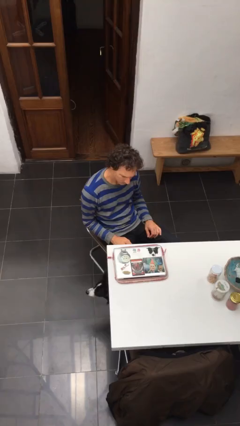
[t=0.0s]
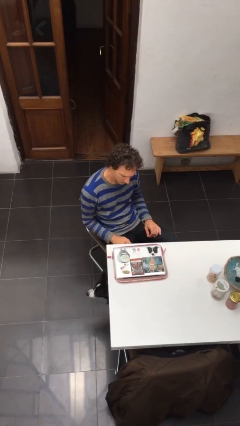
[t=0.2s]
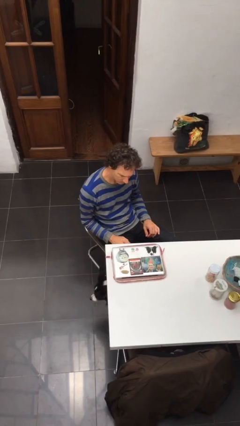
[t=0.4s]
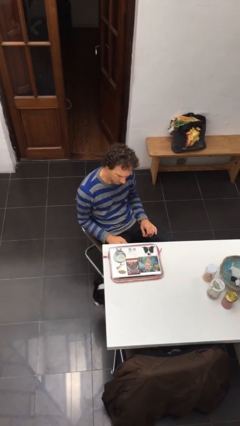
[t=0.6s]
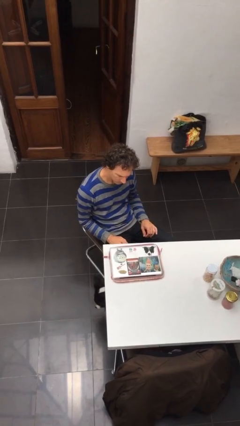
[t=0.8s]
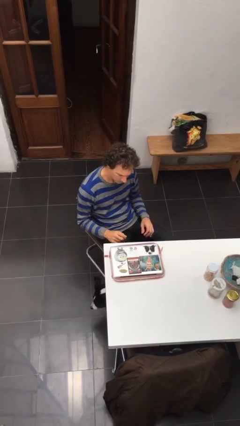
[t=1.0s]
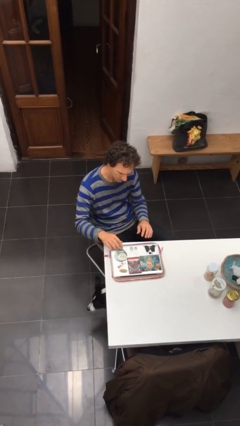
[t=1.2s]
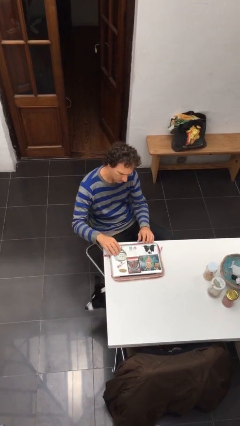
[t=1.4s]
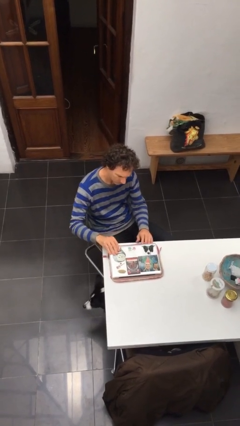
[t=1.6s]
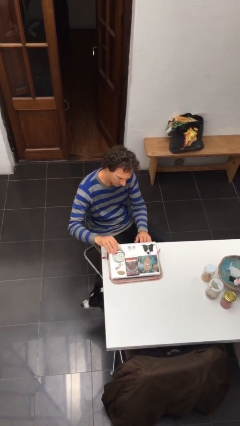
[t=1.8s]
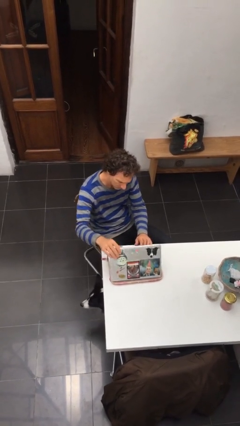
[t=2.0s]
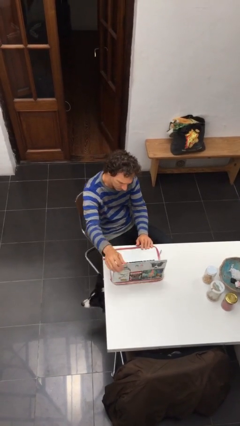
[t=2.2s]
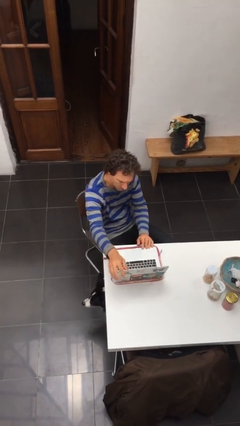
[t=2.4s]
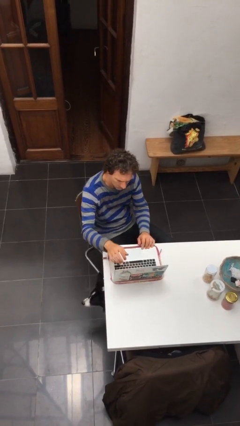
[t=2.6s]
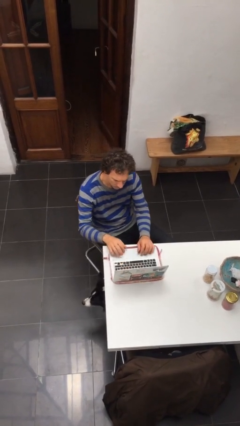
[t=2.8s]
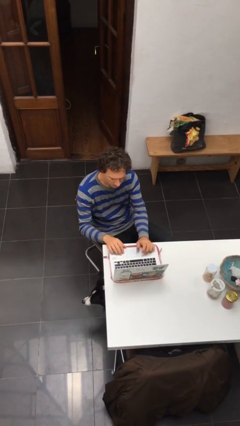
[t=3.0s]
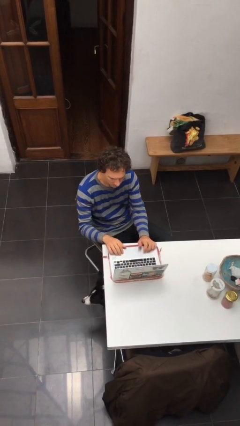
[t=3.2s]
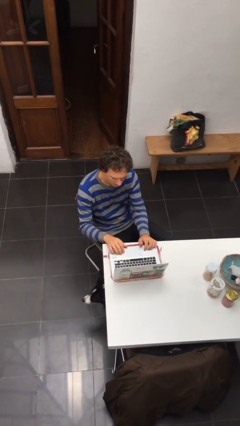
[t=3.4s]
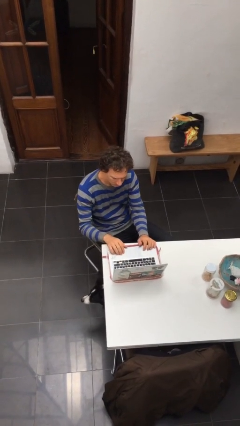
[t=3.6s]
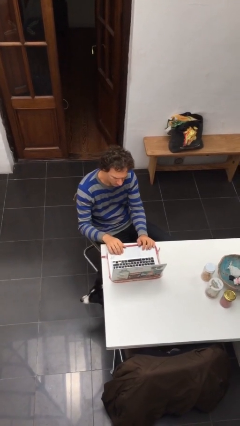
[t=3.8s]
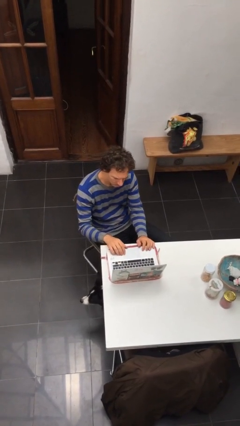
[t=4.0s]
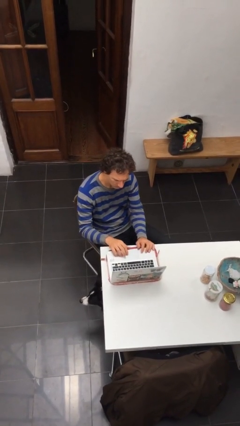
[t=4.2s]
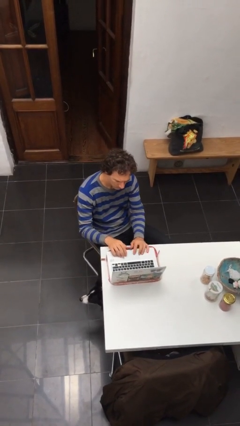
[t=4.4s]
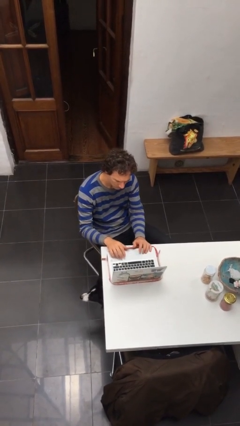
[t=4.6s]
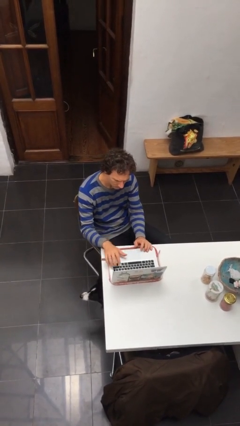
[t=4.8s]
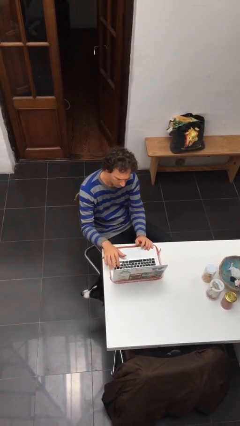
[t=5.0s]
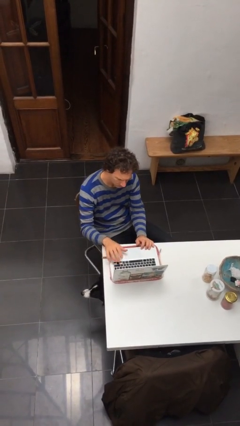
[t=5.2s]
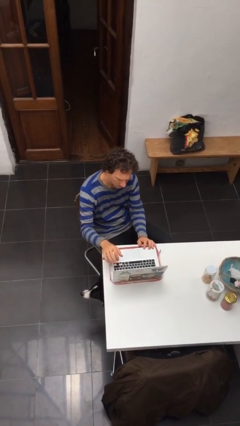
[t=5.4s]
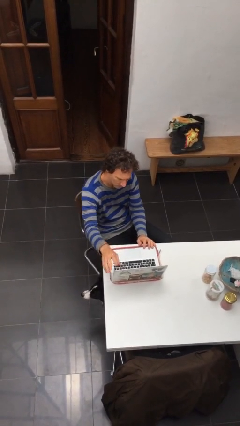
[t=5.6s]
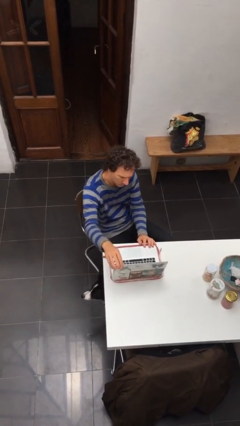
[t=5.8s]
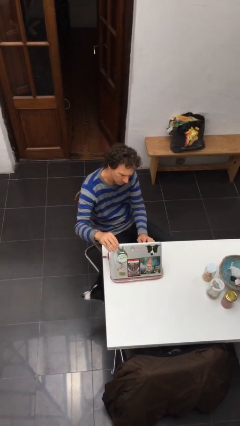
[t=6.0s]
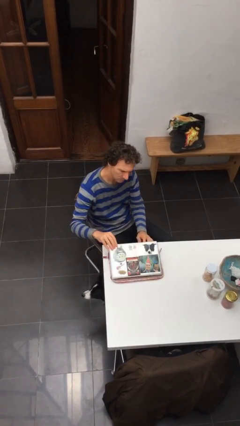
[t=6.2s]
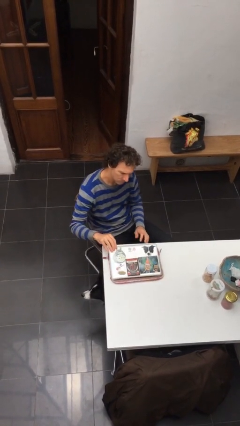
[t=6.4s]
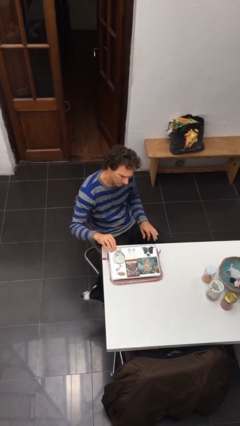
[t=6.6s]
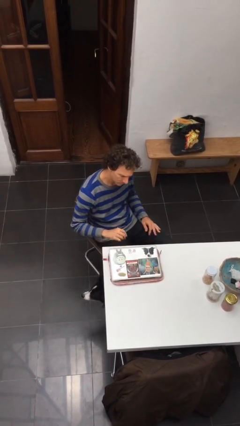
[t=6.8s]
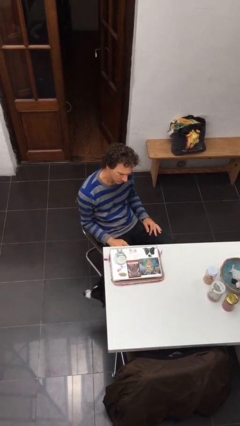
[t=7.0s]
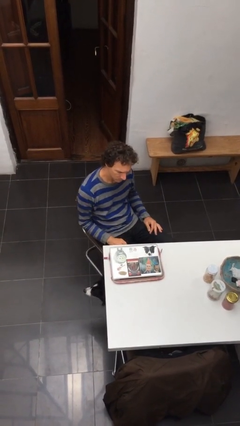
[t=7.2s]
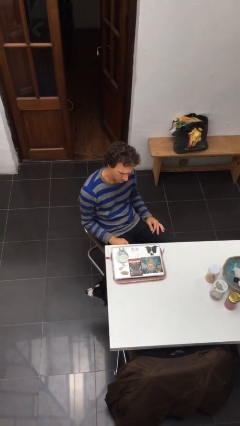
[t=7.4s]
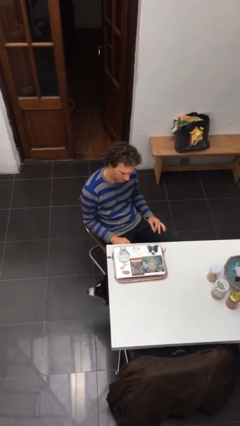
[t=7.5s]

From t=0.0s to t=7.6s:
person interacts with laptop

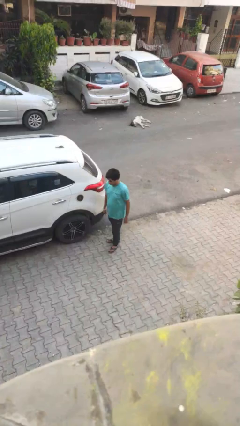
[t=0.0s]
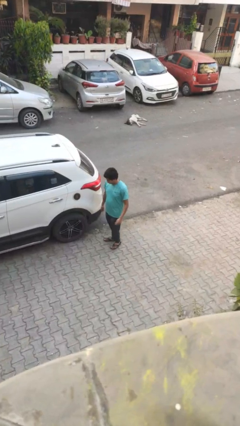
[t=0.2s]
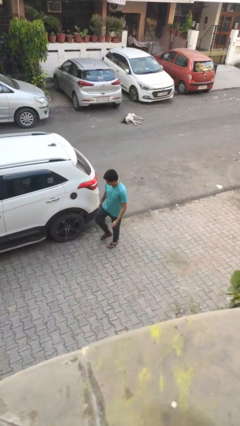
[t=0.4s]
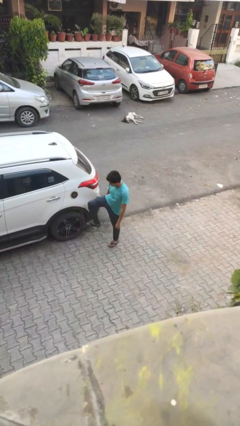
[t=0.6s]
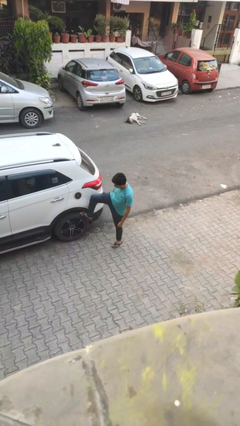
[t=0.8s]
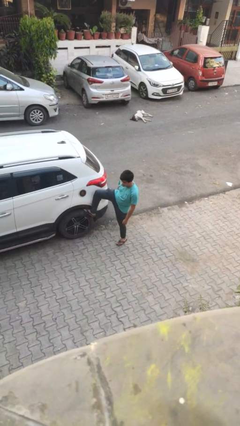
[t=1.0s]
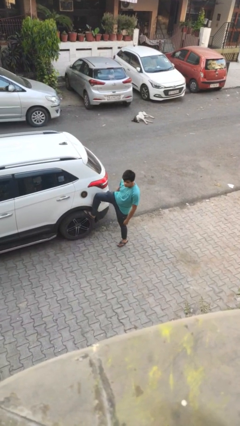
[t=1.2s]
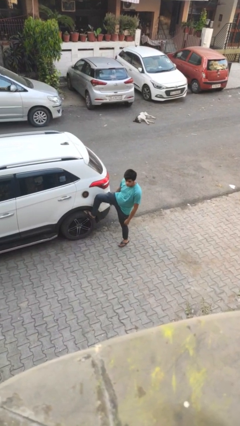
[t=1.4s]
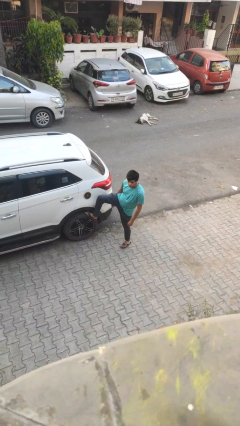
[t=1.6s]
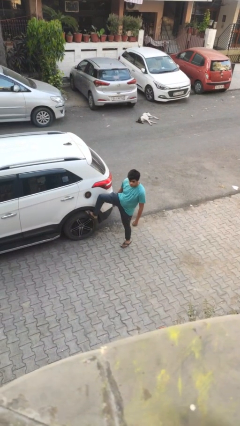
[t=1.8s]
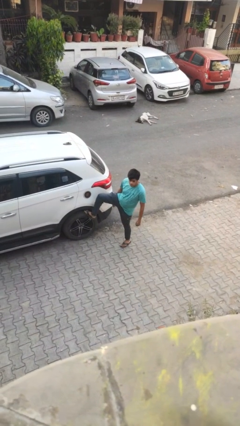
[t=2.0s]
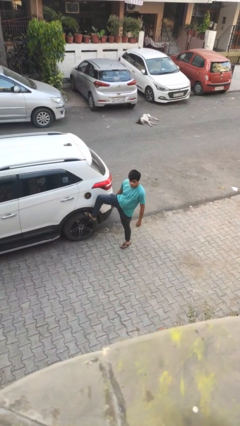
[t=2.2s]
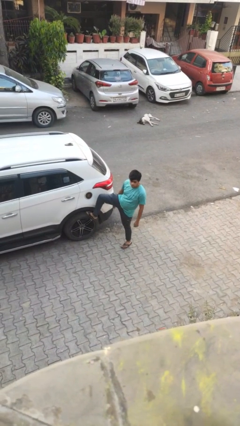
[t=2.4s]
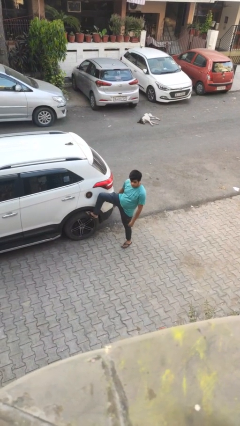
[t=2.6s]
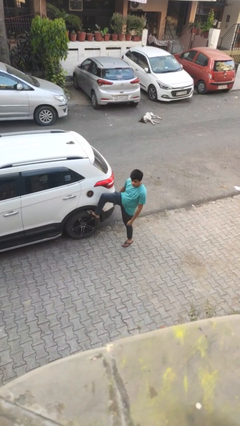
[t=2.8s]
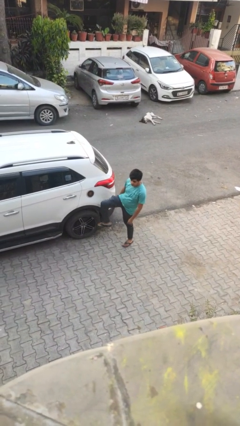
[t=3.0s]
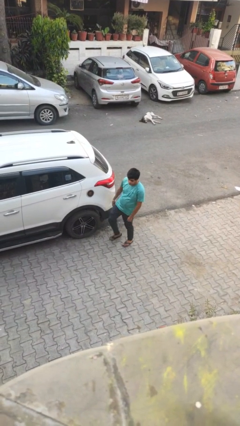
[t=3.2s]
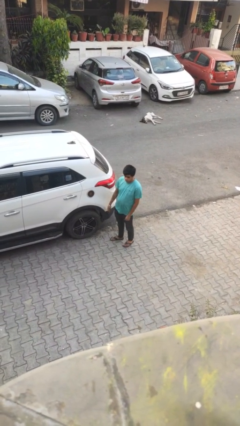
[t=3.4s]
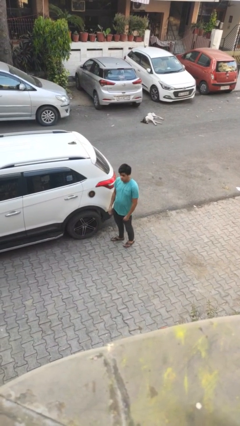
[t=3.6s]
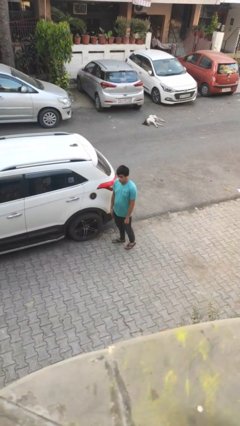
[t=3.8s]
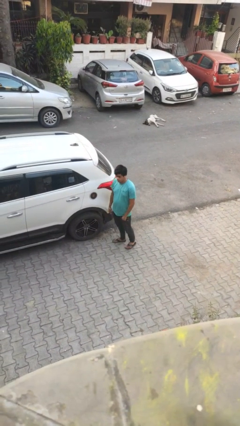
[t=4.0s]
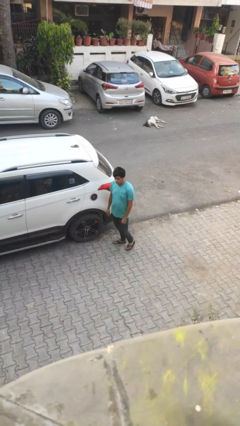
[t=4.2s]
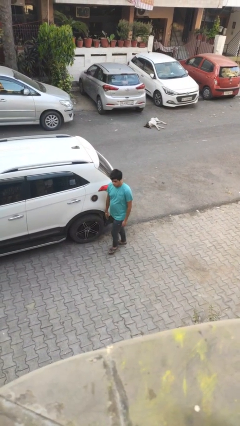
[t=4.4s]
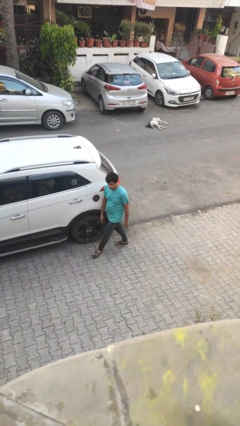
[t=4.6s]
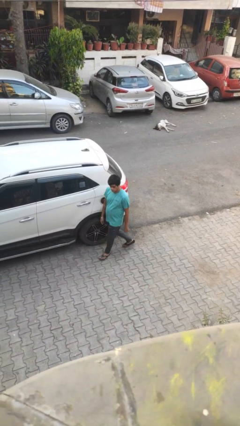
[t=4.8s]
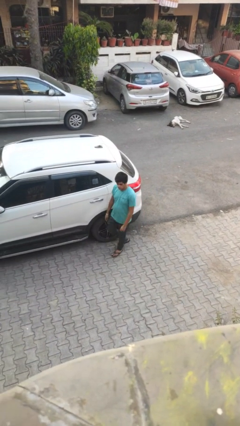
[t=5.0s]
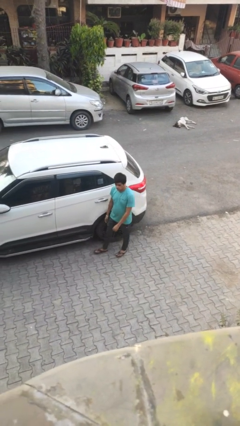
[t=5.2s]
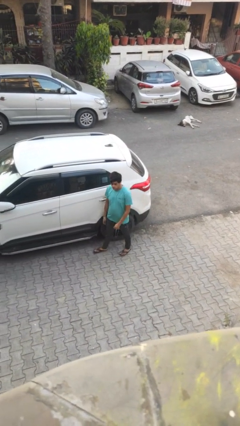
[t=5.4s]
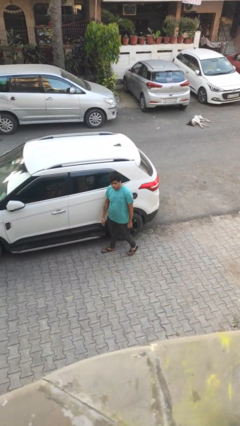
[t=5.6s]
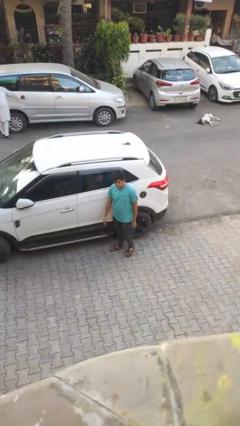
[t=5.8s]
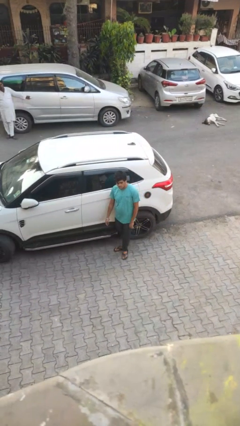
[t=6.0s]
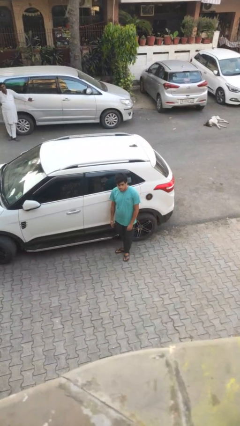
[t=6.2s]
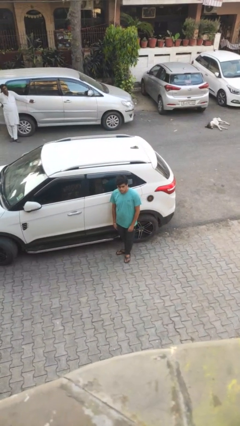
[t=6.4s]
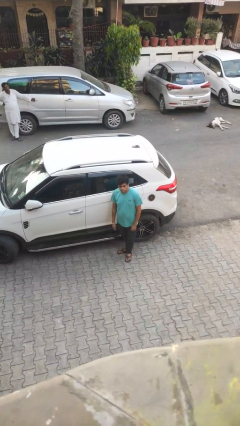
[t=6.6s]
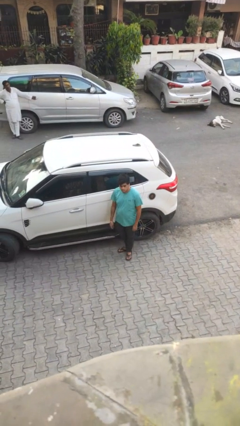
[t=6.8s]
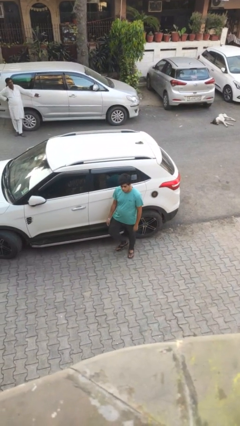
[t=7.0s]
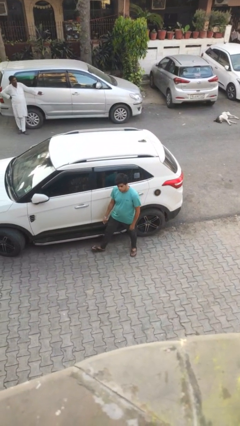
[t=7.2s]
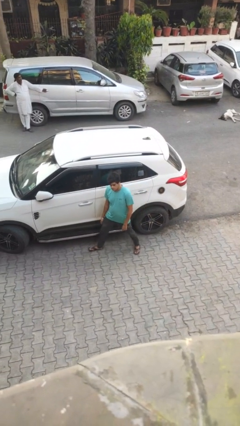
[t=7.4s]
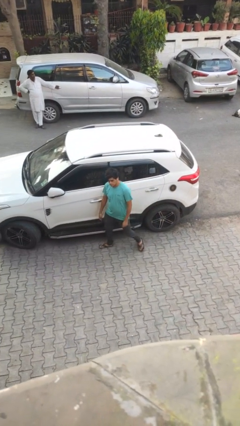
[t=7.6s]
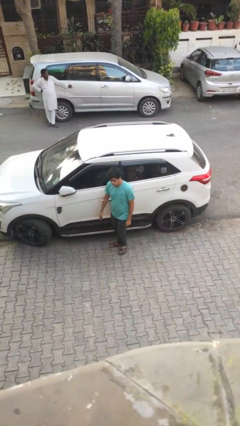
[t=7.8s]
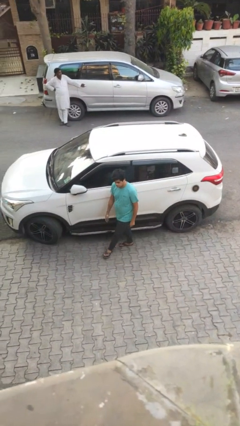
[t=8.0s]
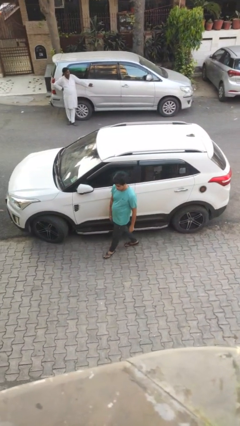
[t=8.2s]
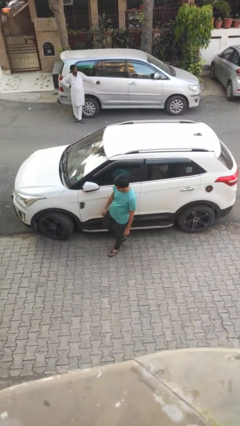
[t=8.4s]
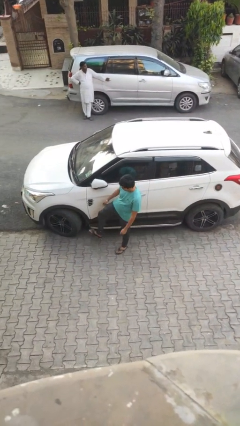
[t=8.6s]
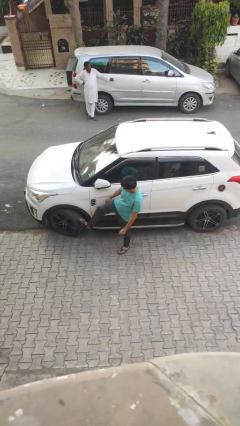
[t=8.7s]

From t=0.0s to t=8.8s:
person kicks car tires

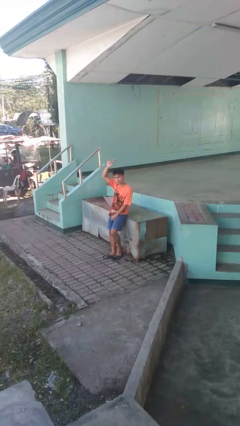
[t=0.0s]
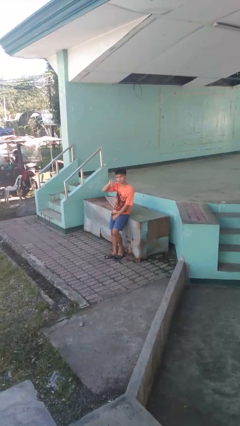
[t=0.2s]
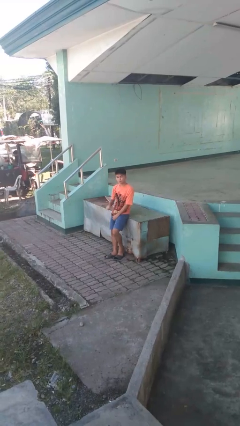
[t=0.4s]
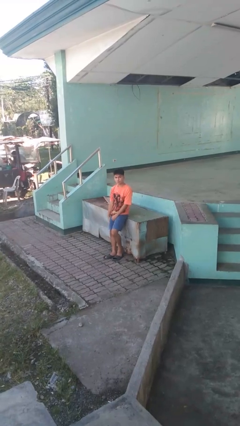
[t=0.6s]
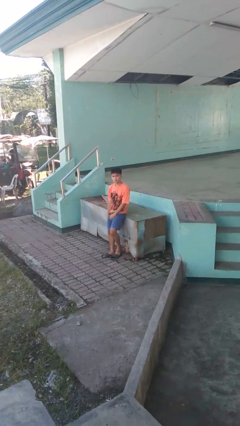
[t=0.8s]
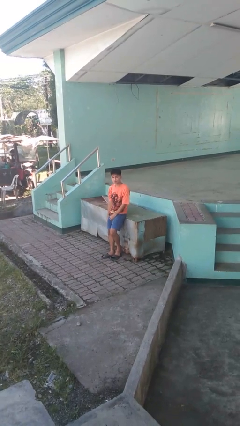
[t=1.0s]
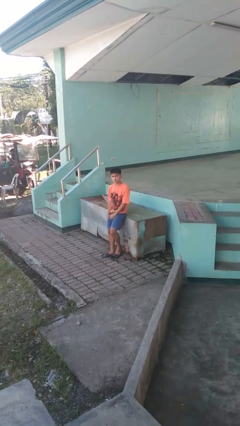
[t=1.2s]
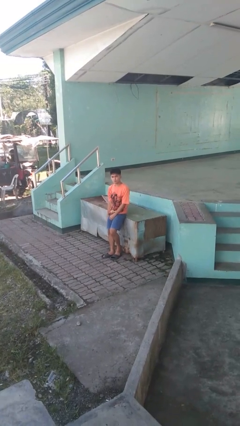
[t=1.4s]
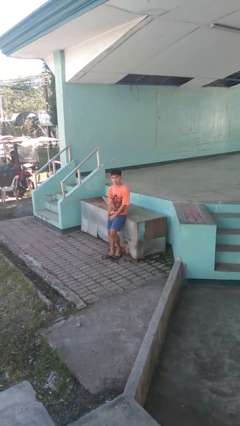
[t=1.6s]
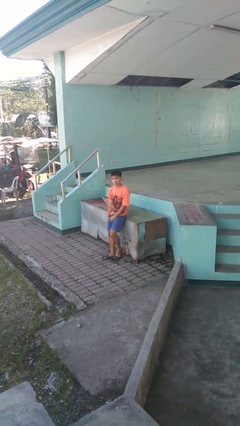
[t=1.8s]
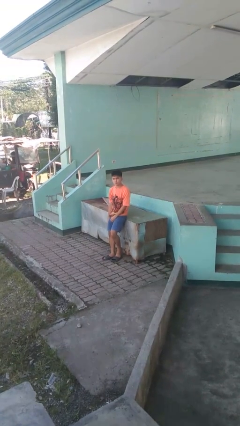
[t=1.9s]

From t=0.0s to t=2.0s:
person gestures lower hand
